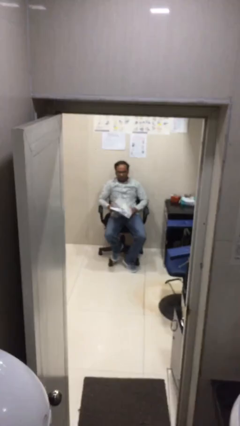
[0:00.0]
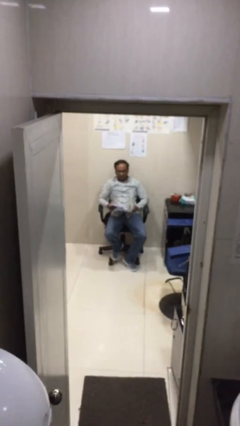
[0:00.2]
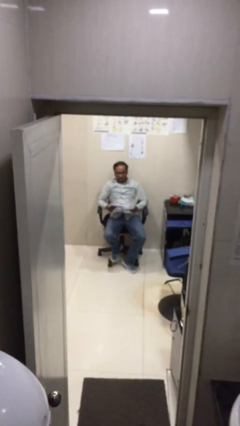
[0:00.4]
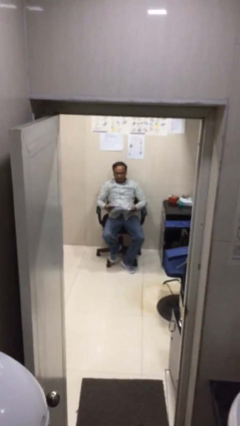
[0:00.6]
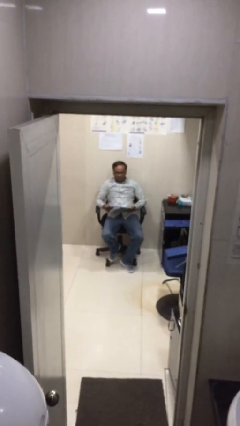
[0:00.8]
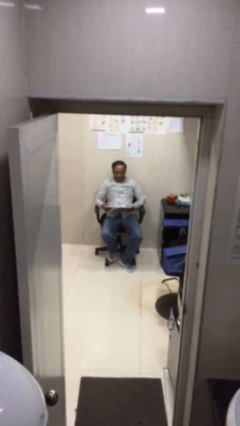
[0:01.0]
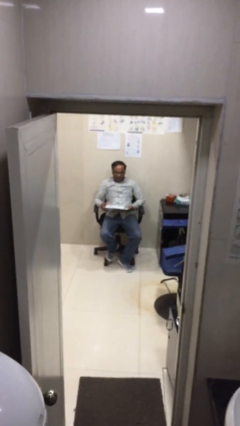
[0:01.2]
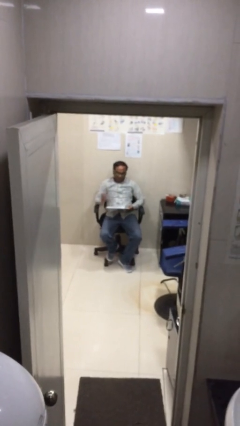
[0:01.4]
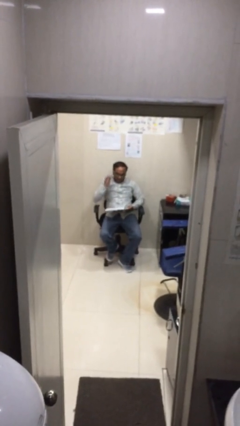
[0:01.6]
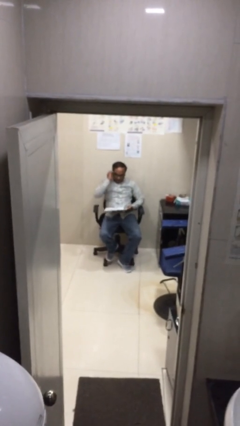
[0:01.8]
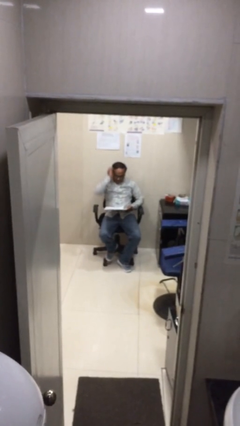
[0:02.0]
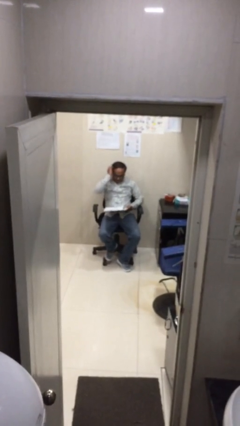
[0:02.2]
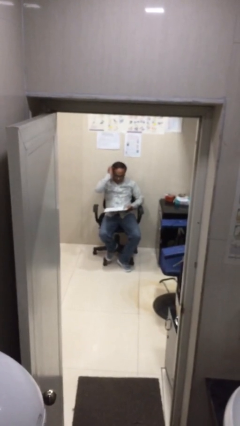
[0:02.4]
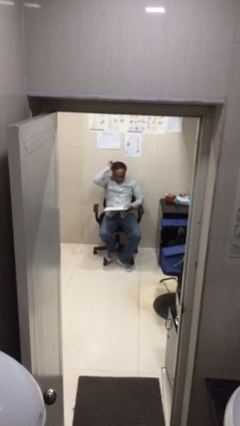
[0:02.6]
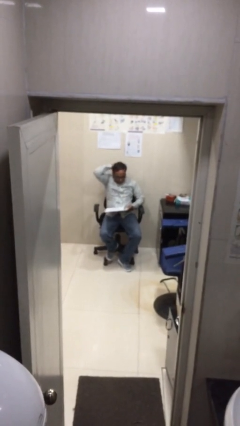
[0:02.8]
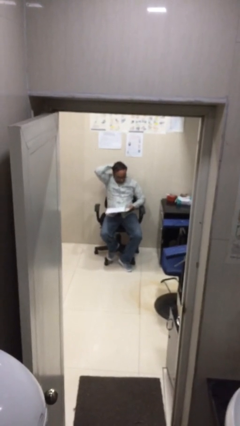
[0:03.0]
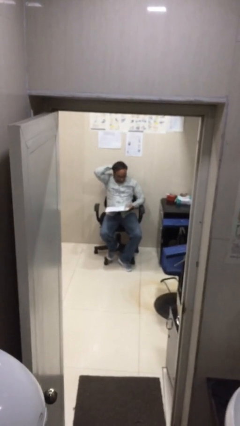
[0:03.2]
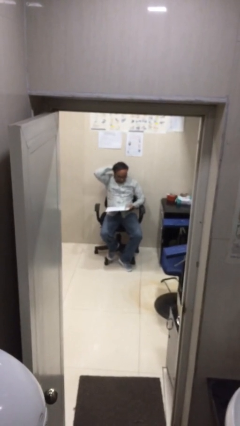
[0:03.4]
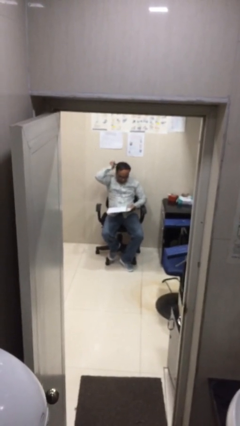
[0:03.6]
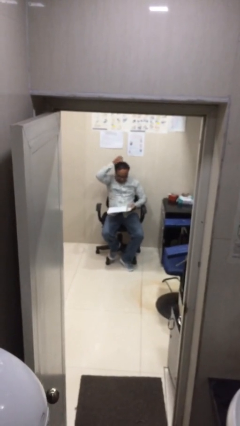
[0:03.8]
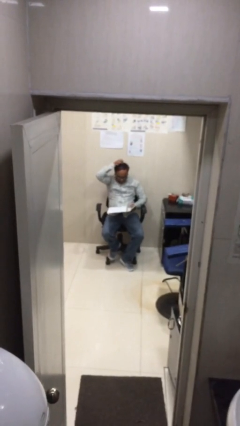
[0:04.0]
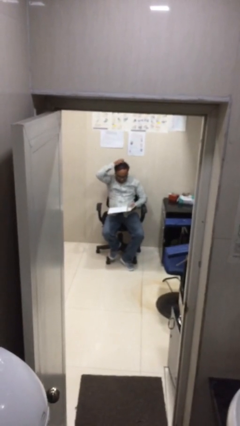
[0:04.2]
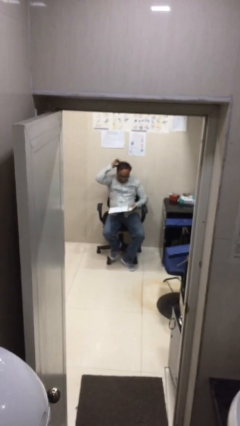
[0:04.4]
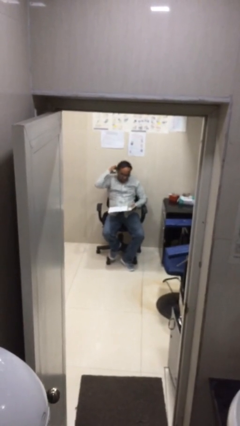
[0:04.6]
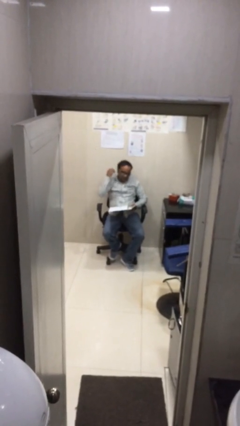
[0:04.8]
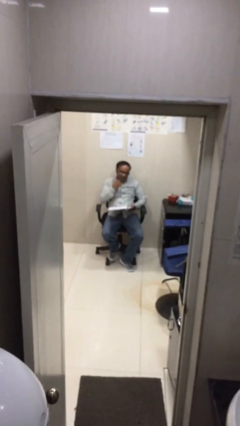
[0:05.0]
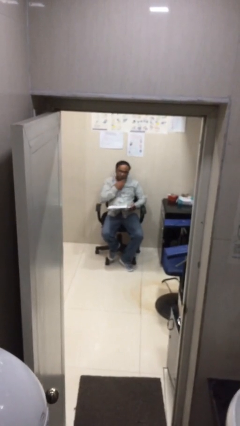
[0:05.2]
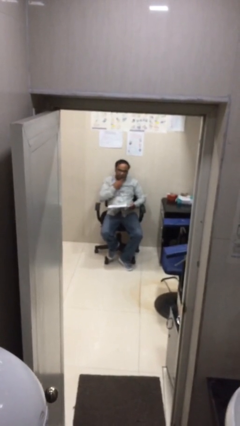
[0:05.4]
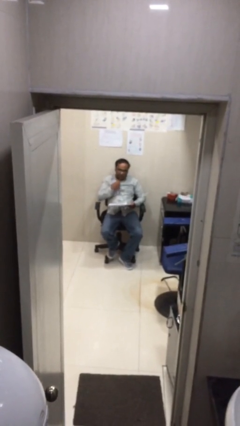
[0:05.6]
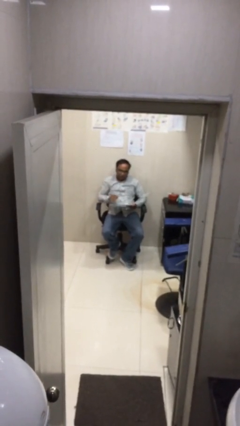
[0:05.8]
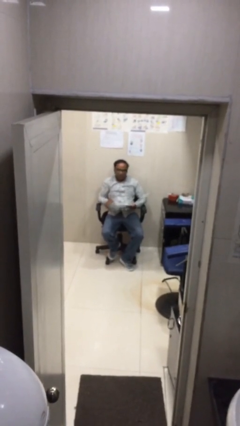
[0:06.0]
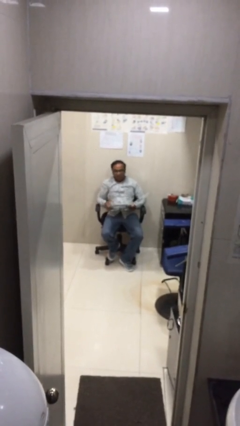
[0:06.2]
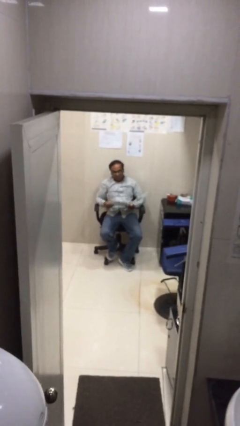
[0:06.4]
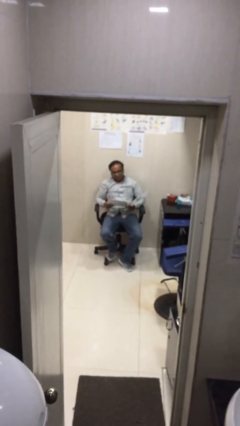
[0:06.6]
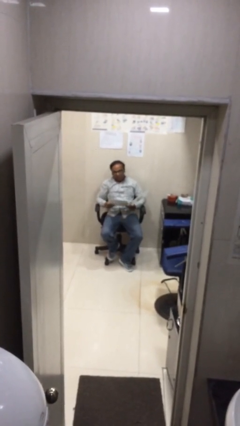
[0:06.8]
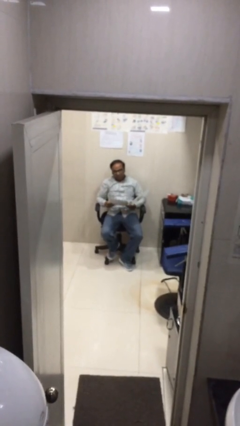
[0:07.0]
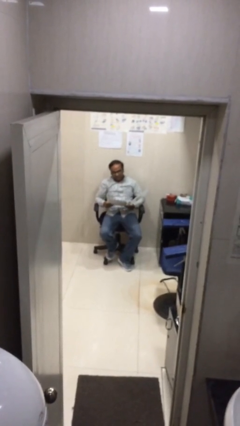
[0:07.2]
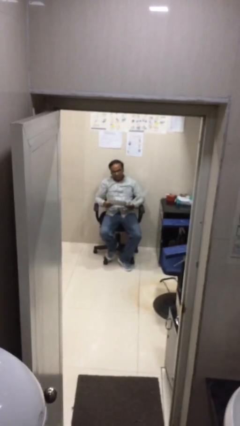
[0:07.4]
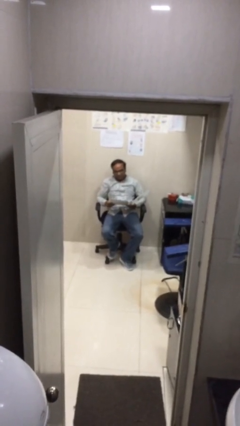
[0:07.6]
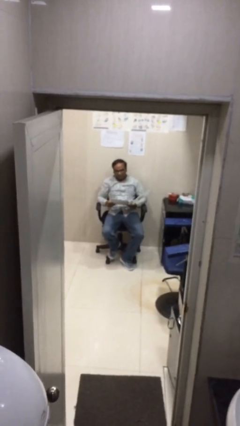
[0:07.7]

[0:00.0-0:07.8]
person reads document

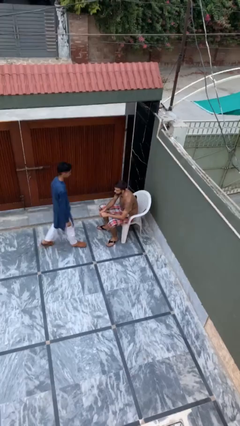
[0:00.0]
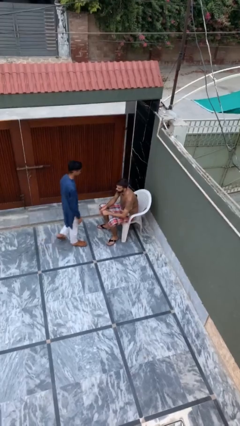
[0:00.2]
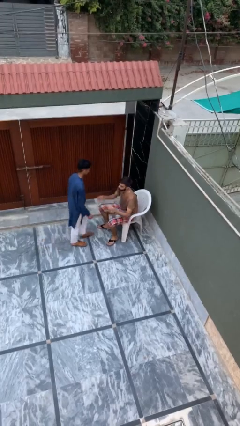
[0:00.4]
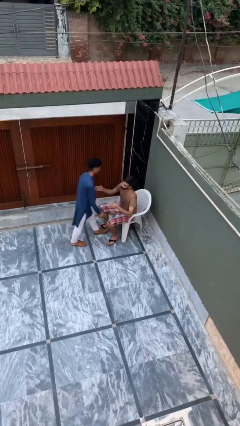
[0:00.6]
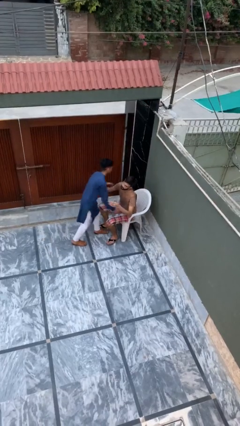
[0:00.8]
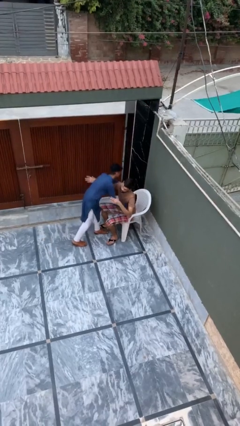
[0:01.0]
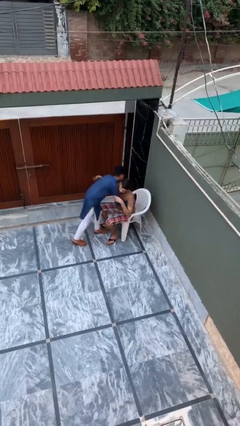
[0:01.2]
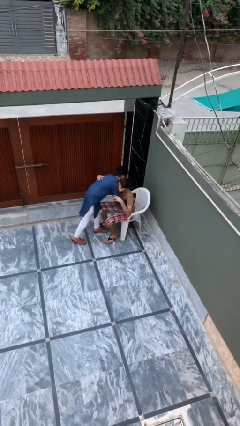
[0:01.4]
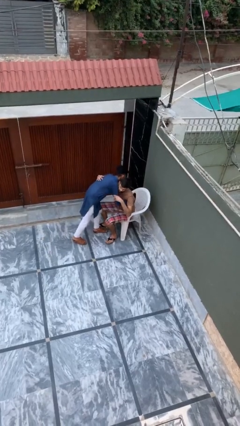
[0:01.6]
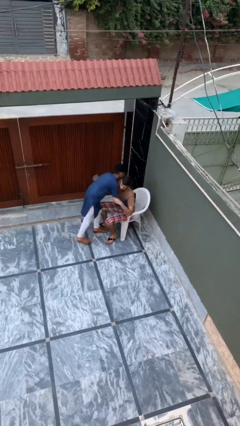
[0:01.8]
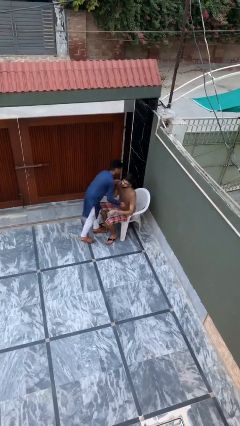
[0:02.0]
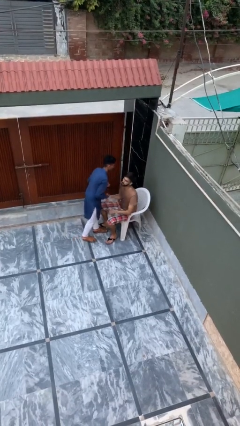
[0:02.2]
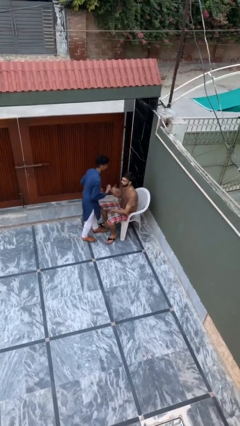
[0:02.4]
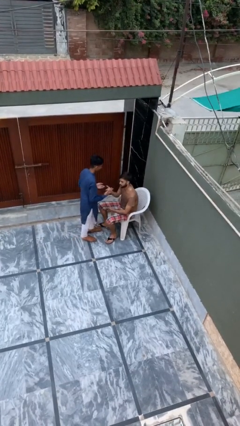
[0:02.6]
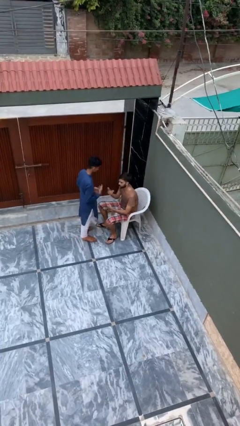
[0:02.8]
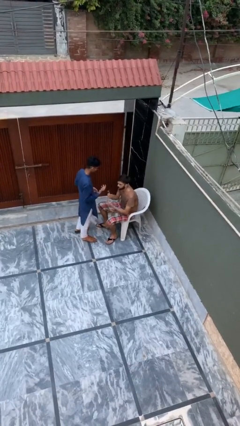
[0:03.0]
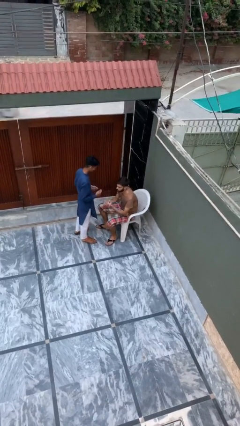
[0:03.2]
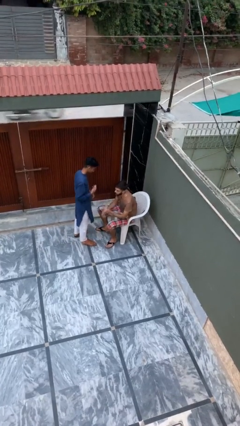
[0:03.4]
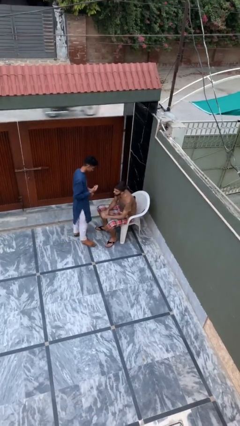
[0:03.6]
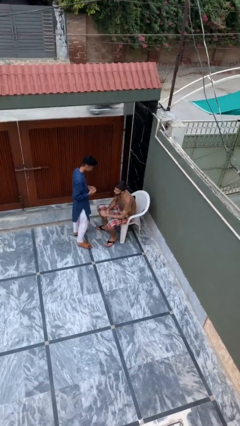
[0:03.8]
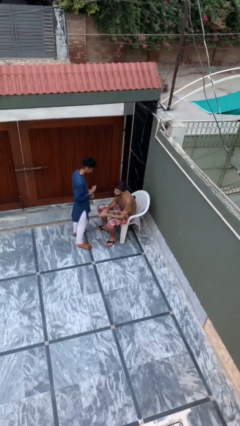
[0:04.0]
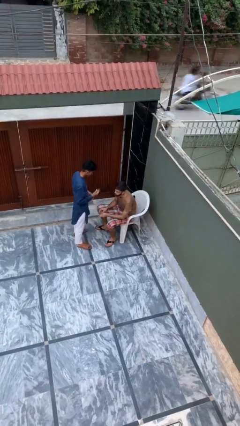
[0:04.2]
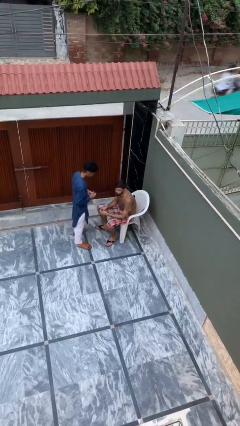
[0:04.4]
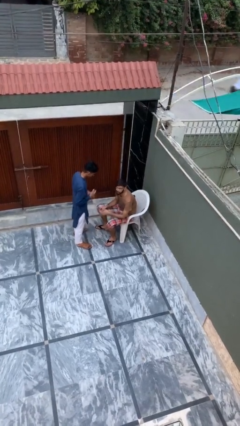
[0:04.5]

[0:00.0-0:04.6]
person embraces person

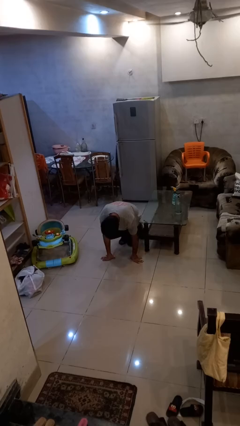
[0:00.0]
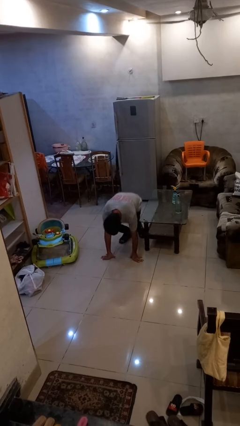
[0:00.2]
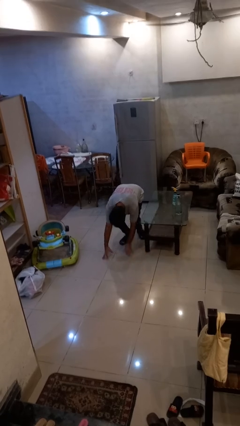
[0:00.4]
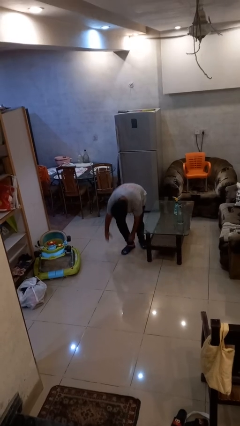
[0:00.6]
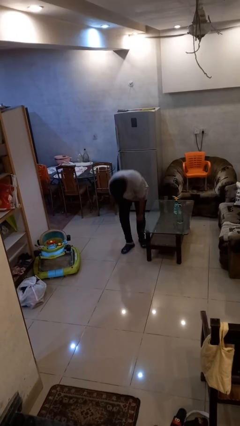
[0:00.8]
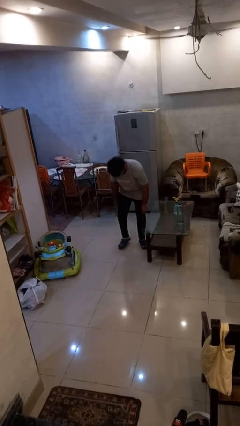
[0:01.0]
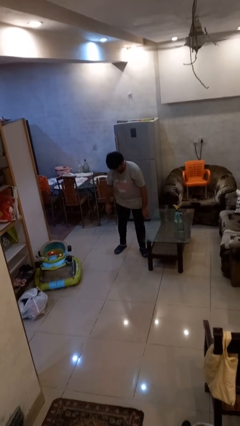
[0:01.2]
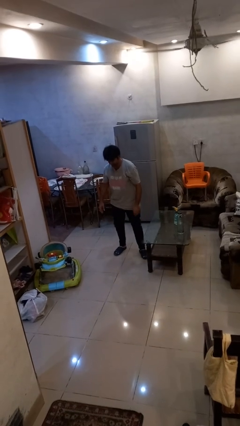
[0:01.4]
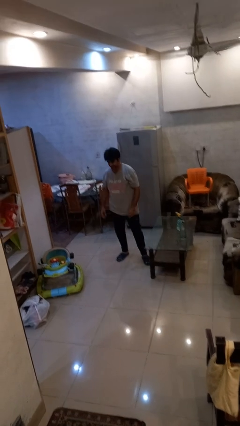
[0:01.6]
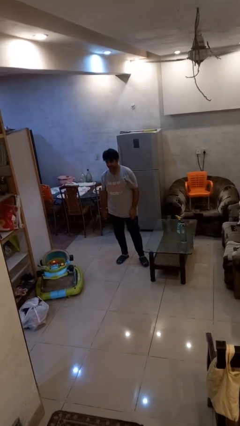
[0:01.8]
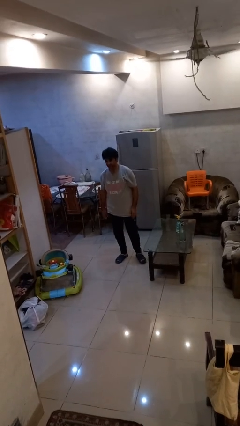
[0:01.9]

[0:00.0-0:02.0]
person stands up from floor

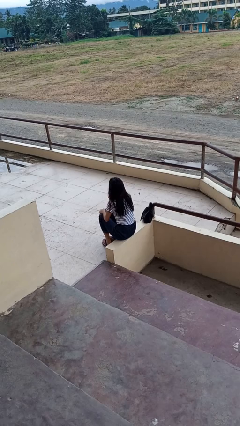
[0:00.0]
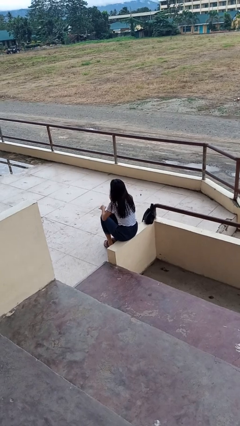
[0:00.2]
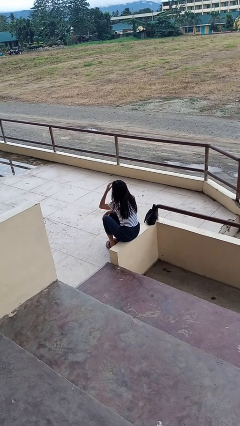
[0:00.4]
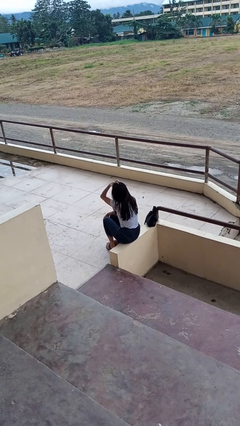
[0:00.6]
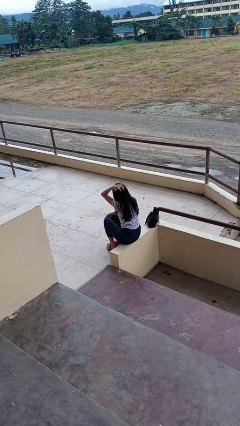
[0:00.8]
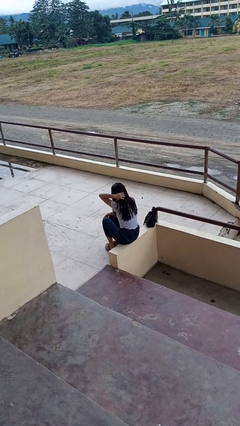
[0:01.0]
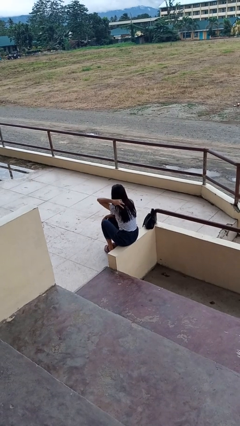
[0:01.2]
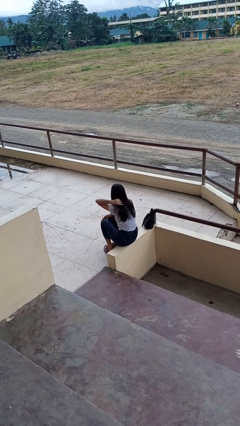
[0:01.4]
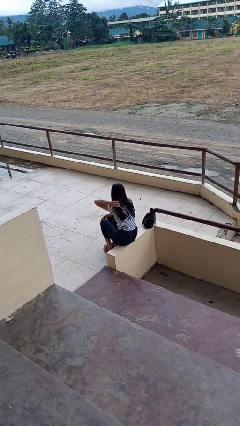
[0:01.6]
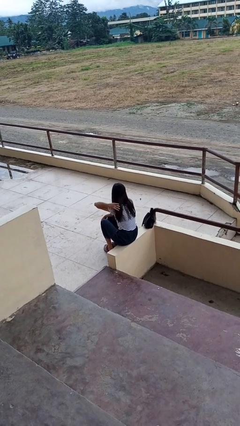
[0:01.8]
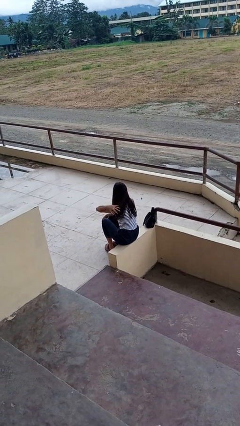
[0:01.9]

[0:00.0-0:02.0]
person strokes hair

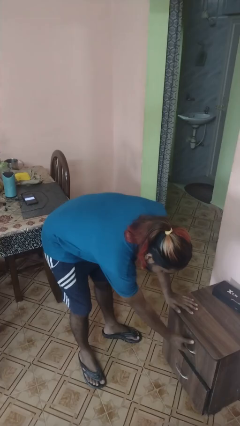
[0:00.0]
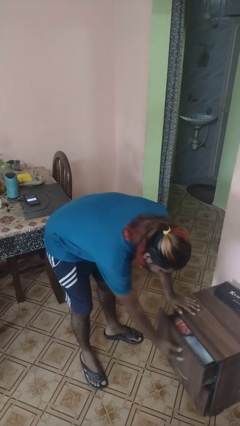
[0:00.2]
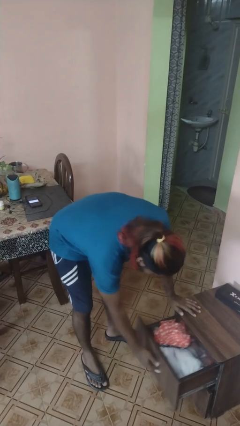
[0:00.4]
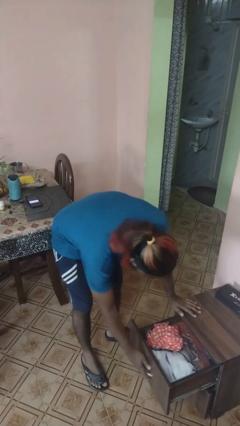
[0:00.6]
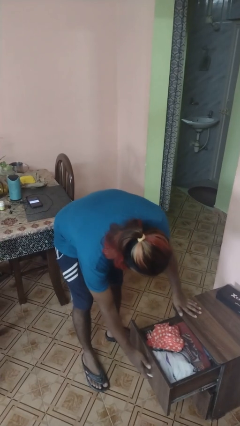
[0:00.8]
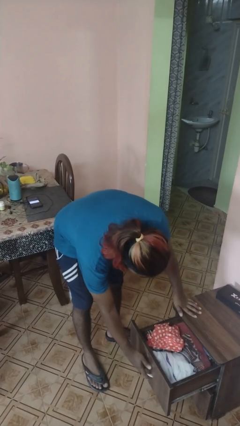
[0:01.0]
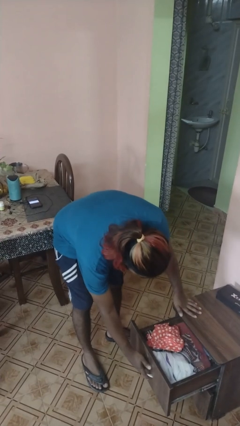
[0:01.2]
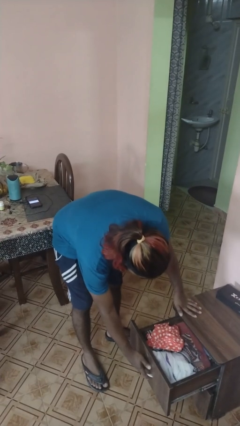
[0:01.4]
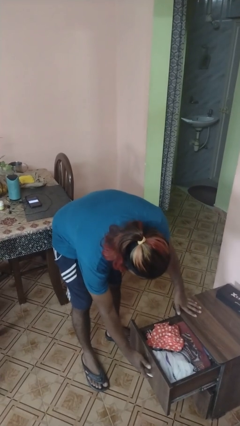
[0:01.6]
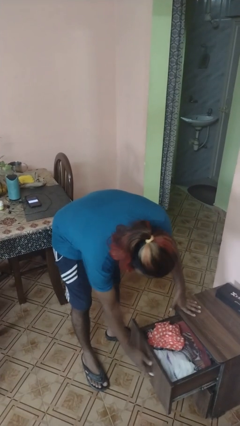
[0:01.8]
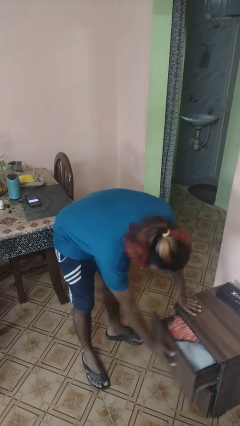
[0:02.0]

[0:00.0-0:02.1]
person opens dresser drawer
